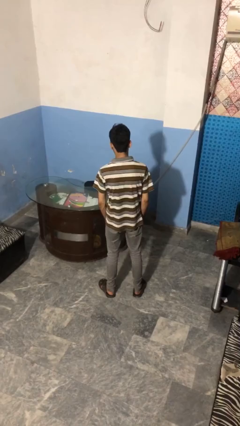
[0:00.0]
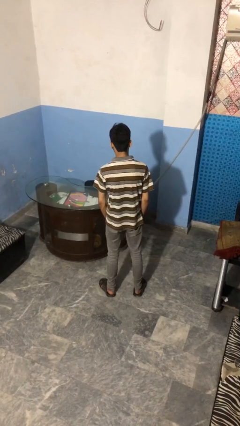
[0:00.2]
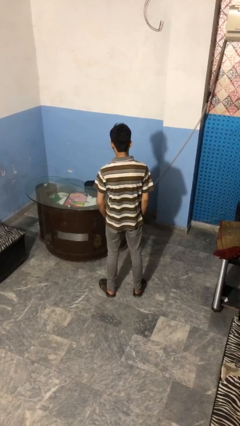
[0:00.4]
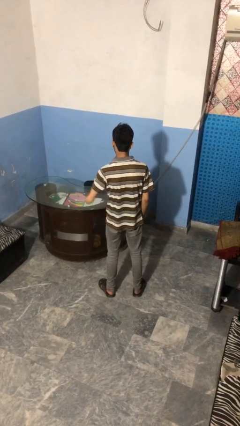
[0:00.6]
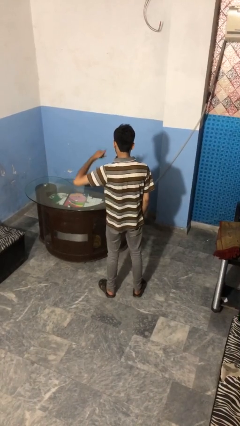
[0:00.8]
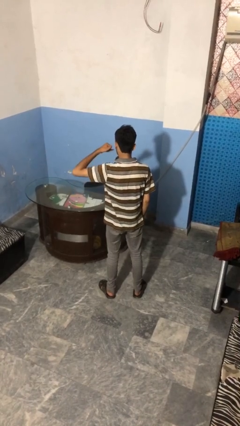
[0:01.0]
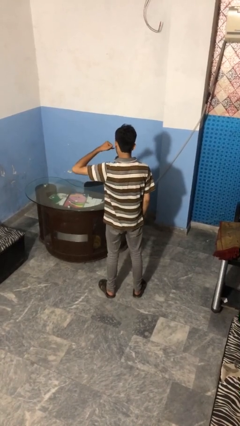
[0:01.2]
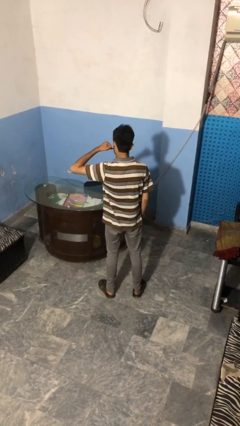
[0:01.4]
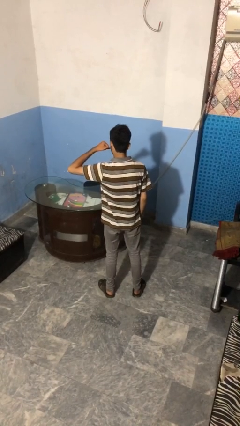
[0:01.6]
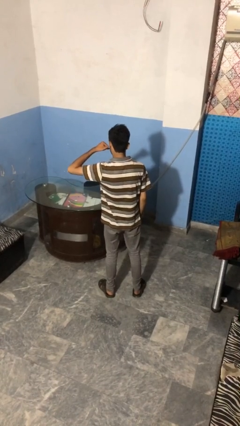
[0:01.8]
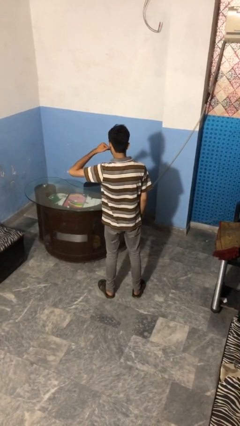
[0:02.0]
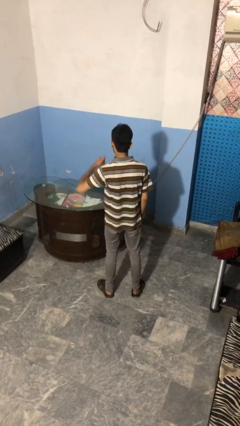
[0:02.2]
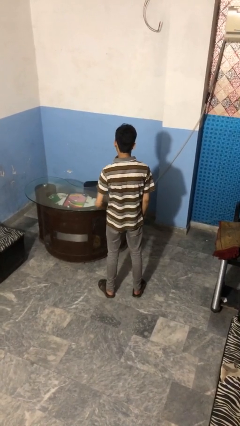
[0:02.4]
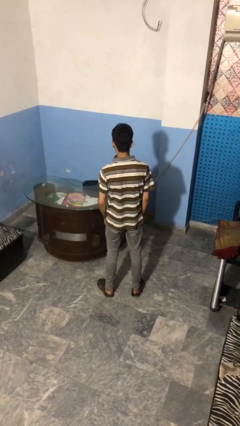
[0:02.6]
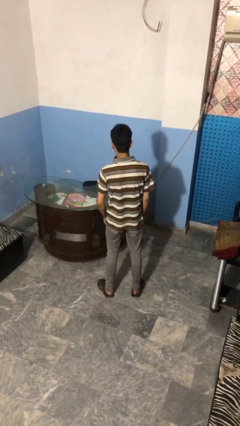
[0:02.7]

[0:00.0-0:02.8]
person gestures call me

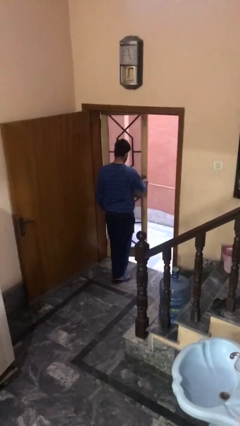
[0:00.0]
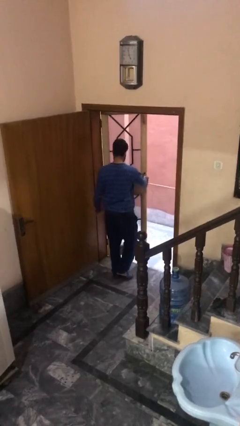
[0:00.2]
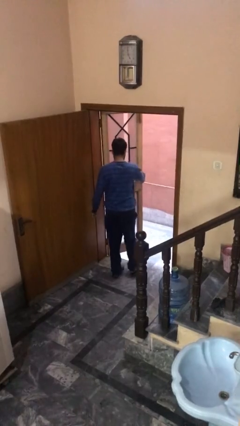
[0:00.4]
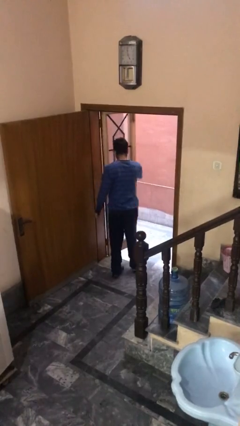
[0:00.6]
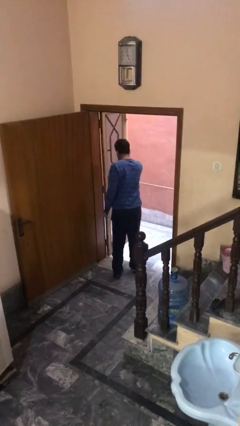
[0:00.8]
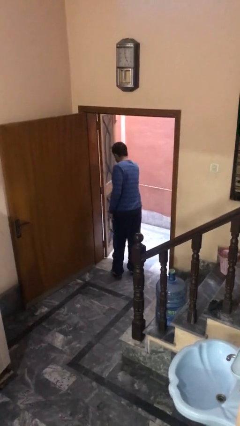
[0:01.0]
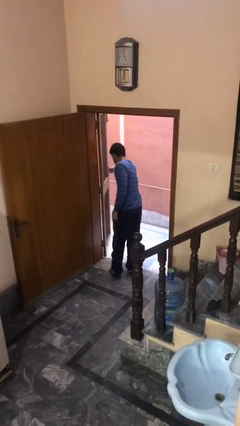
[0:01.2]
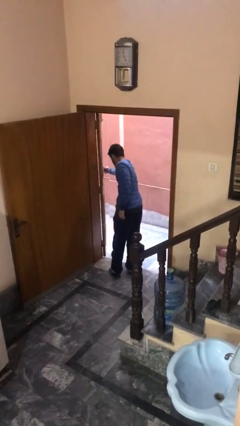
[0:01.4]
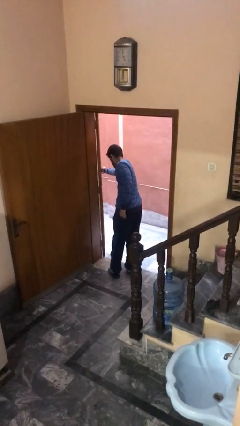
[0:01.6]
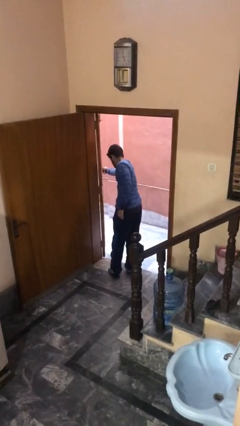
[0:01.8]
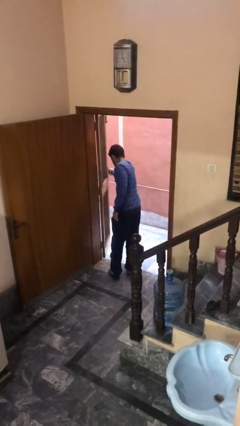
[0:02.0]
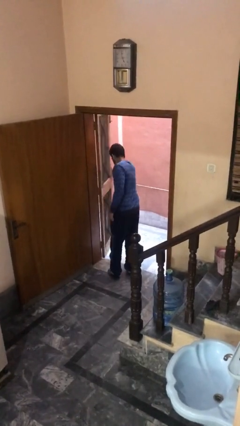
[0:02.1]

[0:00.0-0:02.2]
person opens facility door

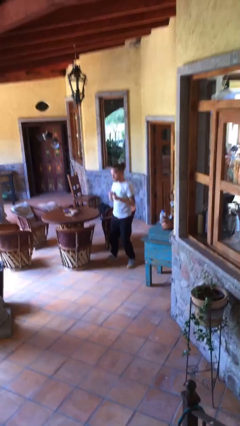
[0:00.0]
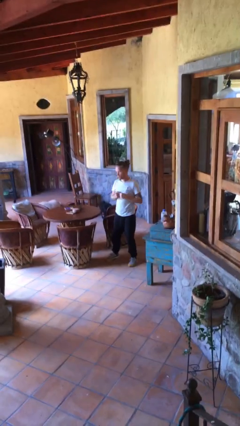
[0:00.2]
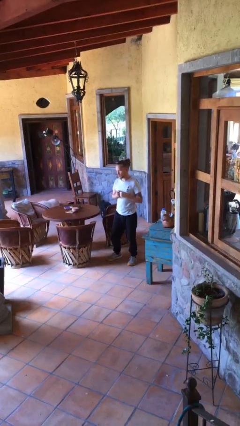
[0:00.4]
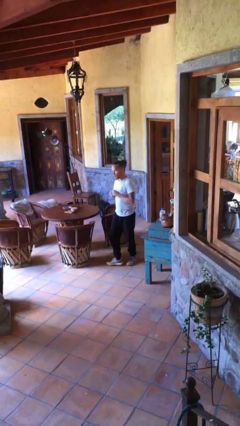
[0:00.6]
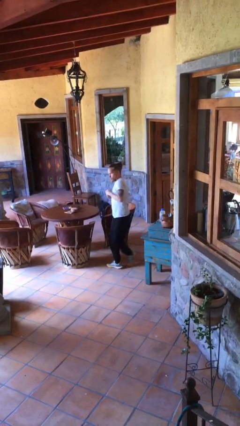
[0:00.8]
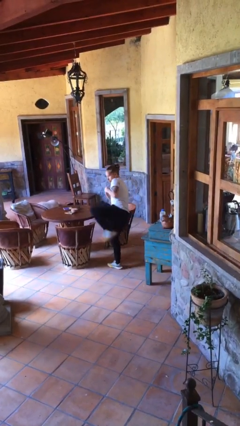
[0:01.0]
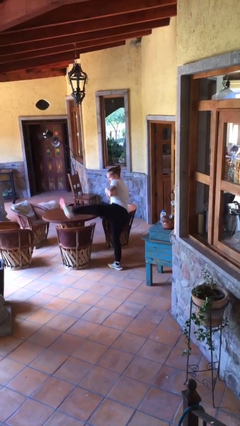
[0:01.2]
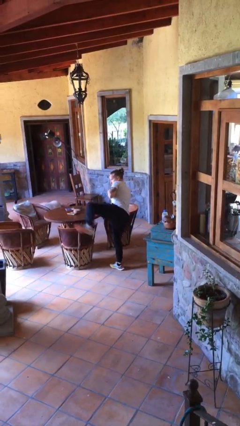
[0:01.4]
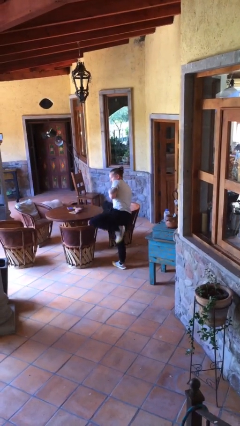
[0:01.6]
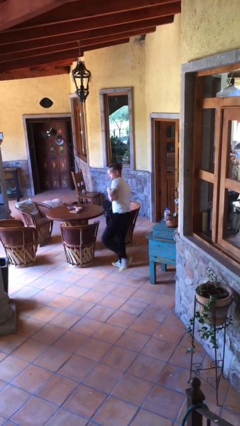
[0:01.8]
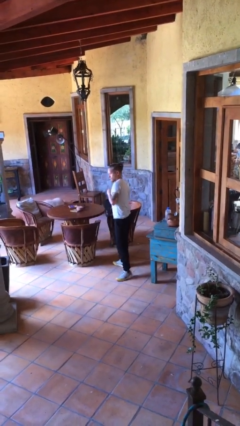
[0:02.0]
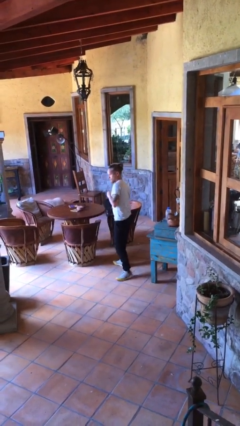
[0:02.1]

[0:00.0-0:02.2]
person karate kicks

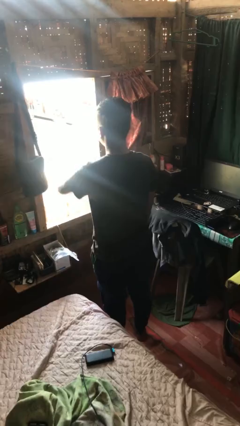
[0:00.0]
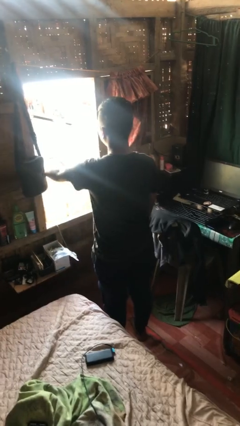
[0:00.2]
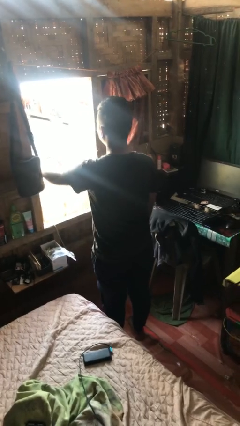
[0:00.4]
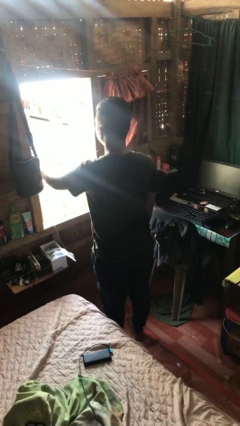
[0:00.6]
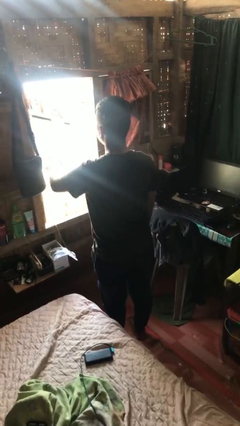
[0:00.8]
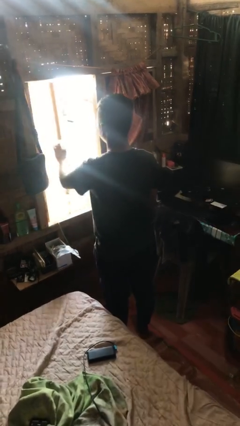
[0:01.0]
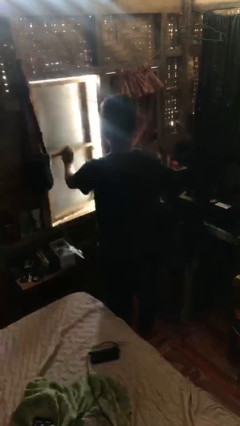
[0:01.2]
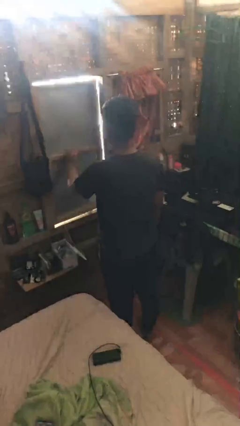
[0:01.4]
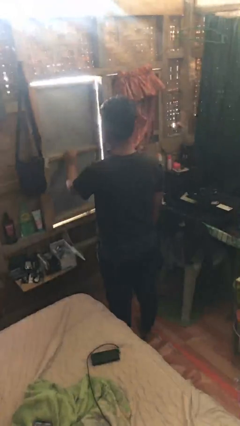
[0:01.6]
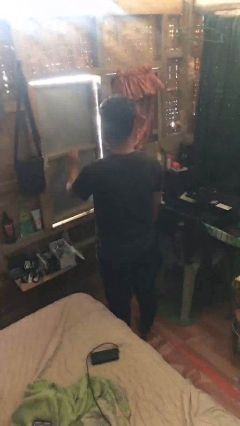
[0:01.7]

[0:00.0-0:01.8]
person closes home window

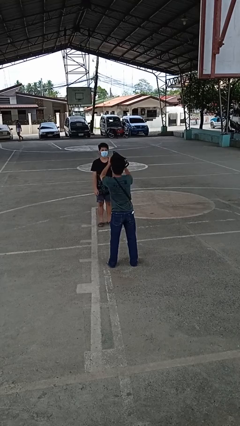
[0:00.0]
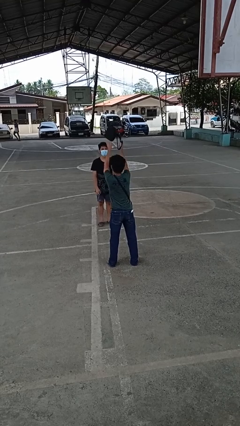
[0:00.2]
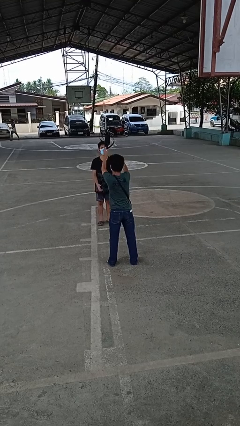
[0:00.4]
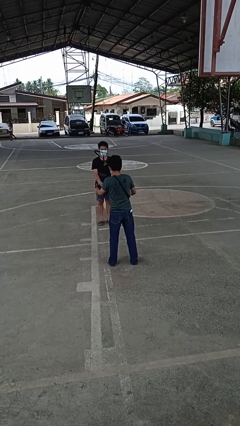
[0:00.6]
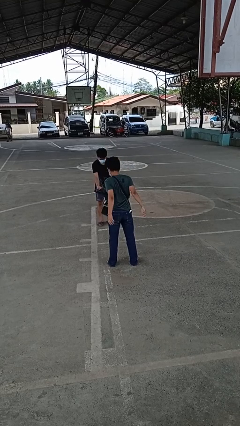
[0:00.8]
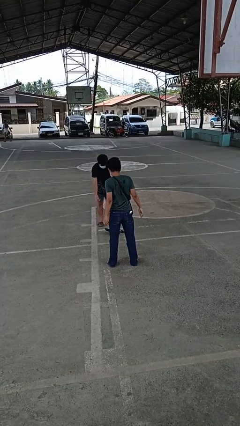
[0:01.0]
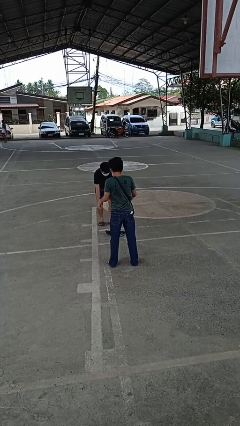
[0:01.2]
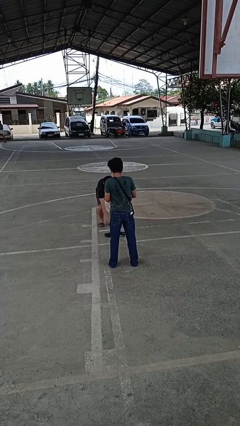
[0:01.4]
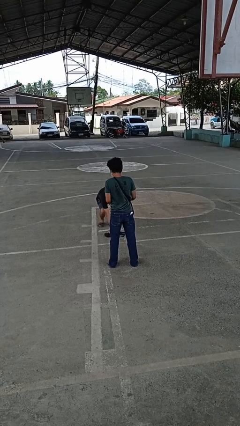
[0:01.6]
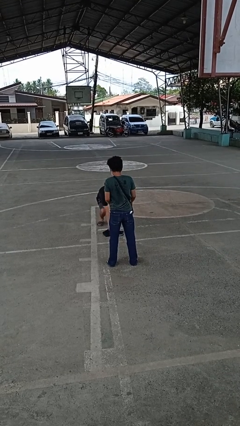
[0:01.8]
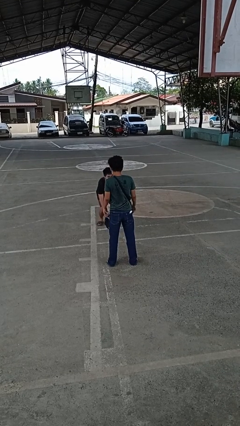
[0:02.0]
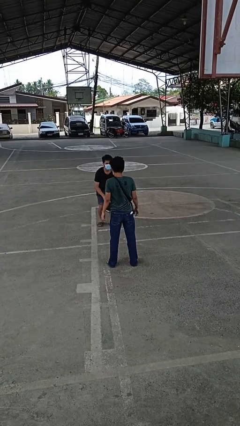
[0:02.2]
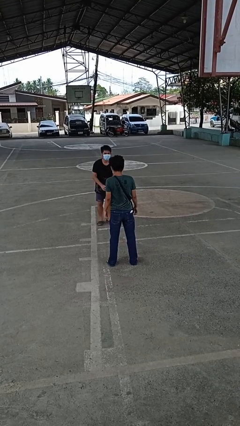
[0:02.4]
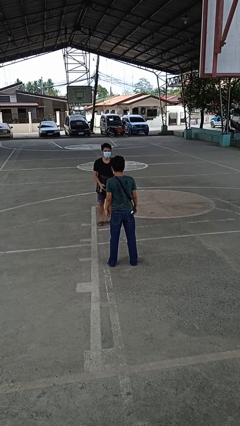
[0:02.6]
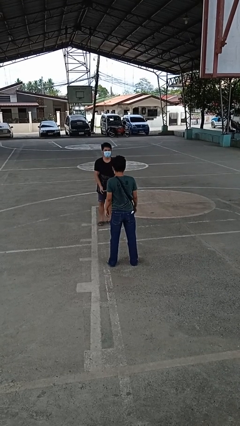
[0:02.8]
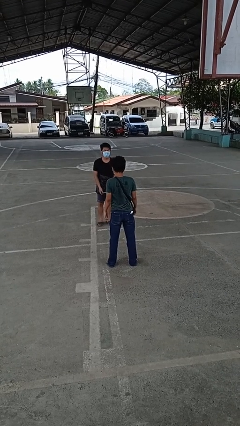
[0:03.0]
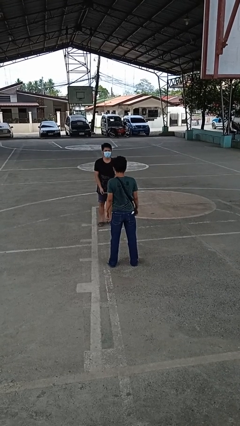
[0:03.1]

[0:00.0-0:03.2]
person throws object to person

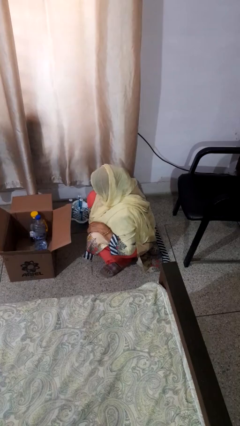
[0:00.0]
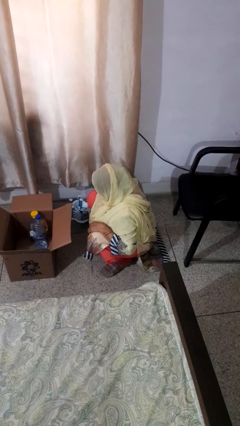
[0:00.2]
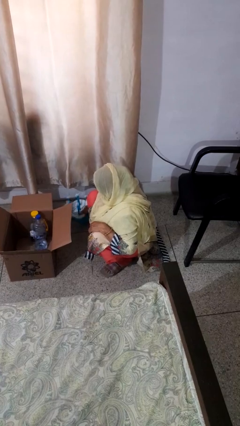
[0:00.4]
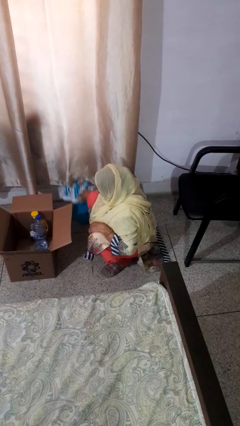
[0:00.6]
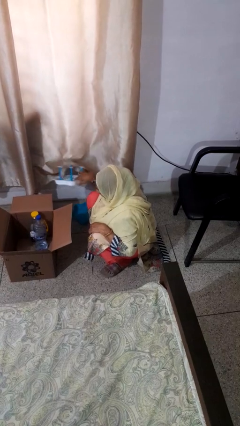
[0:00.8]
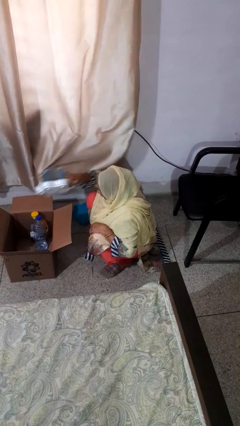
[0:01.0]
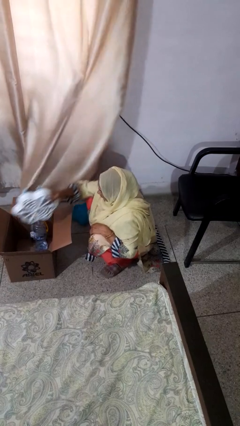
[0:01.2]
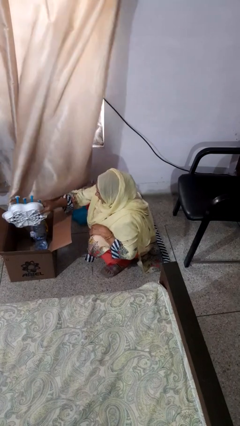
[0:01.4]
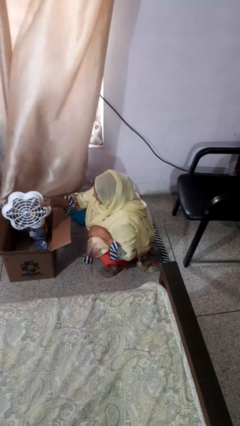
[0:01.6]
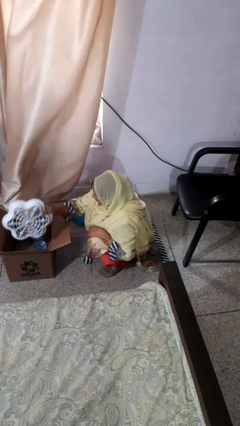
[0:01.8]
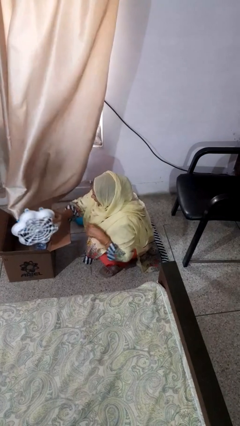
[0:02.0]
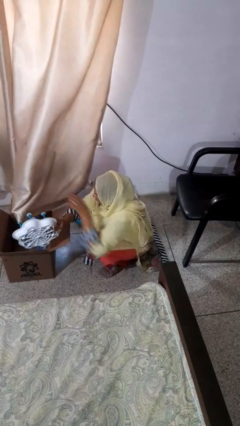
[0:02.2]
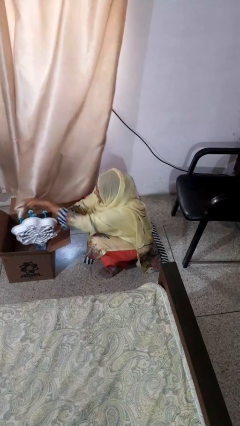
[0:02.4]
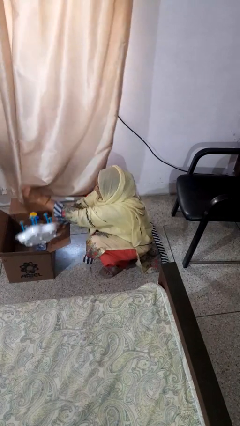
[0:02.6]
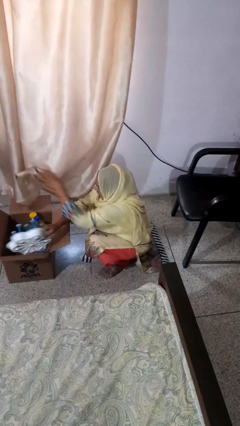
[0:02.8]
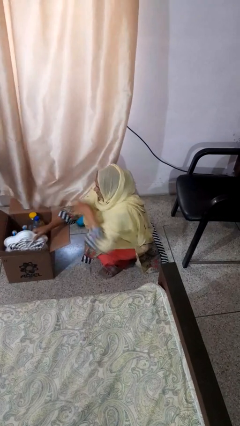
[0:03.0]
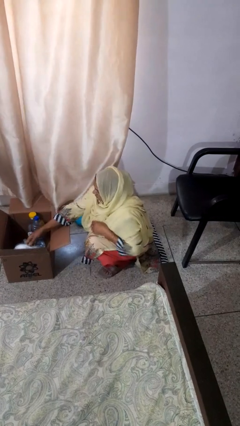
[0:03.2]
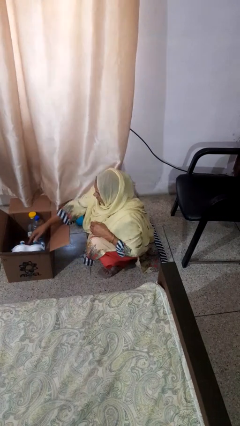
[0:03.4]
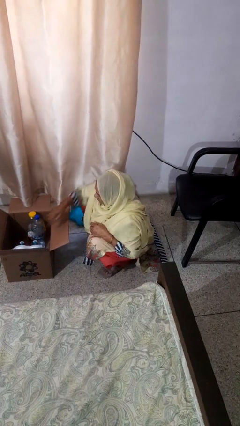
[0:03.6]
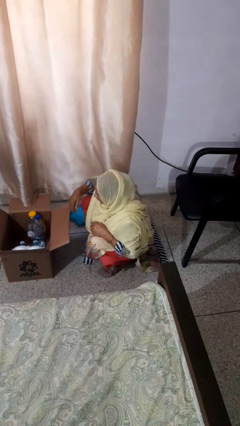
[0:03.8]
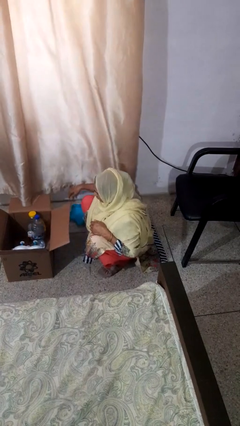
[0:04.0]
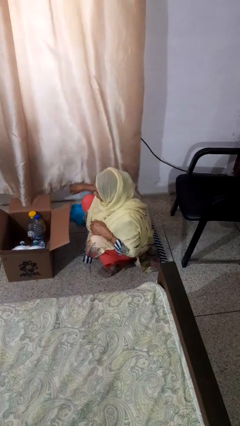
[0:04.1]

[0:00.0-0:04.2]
person puts object into box

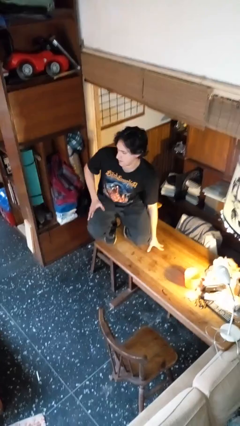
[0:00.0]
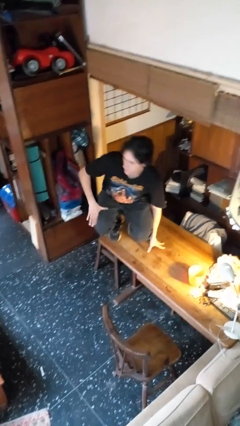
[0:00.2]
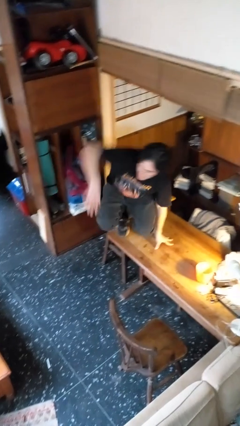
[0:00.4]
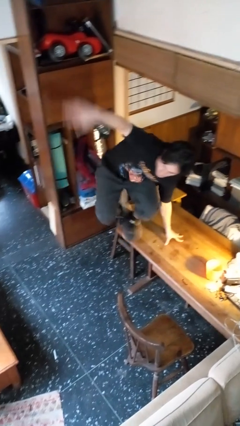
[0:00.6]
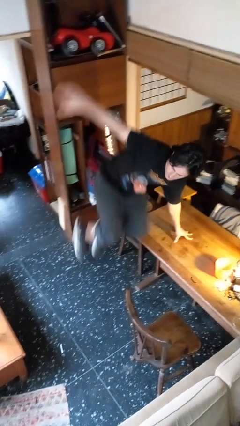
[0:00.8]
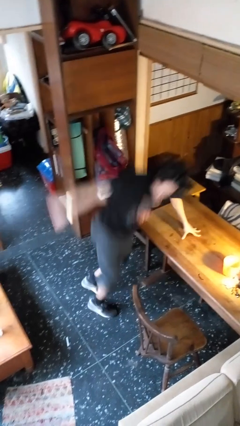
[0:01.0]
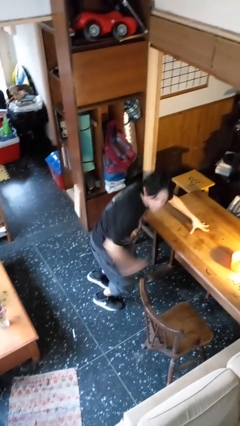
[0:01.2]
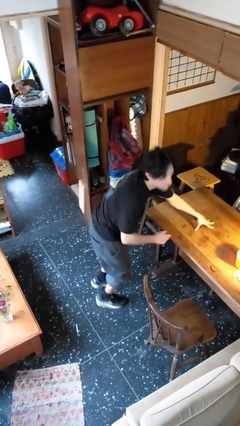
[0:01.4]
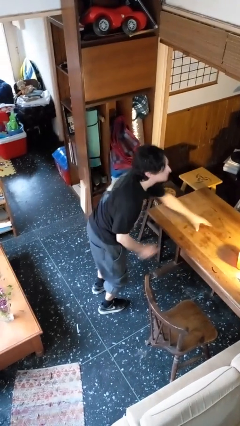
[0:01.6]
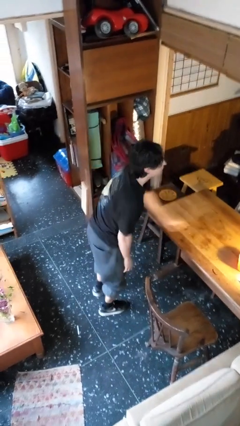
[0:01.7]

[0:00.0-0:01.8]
person climbs off table
